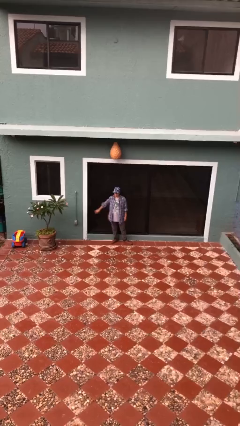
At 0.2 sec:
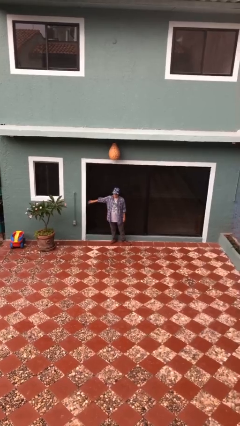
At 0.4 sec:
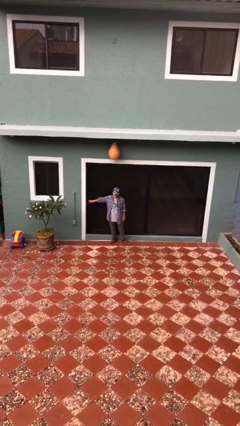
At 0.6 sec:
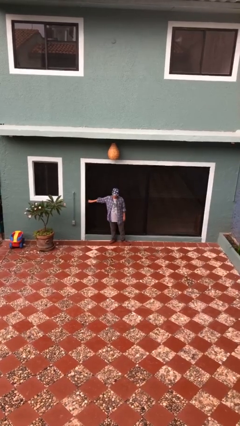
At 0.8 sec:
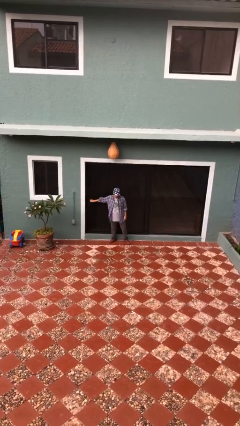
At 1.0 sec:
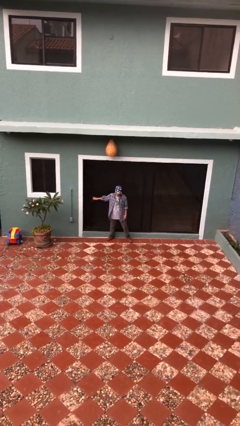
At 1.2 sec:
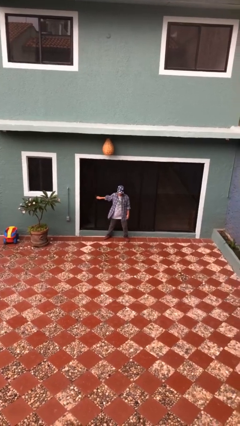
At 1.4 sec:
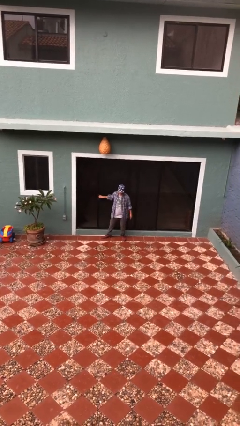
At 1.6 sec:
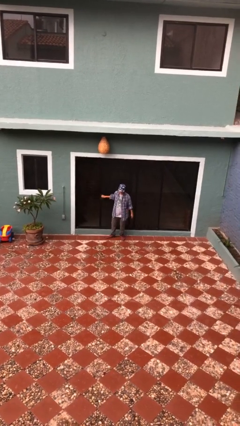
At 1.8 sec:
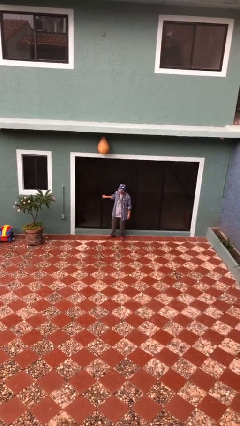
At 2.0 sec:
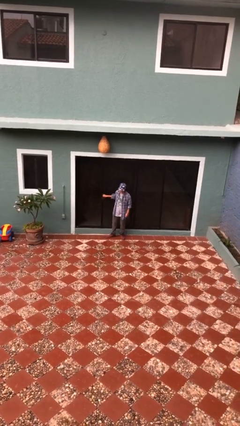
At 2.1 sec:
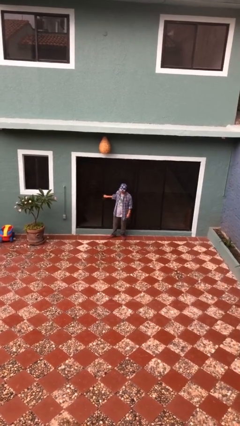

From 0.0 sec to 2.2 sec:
person opens sliding door

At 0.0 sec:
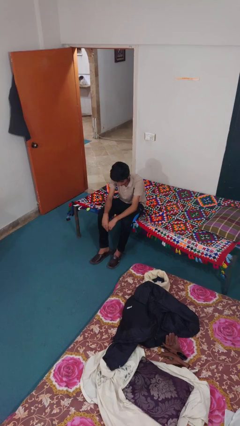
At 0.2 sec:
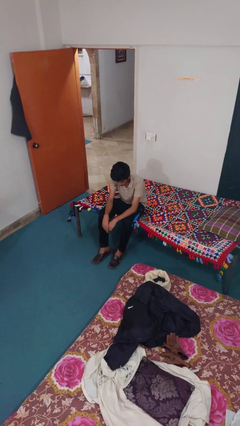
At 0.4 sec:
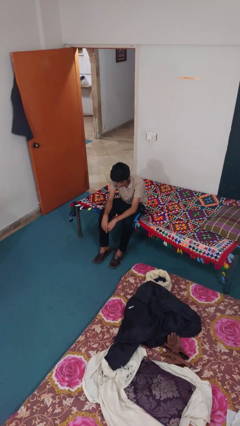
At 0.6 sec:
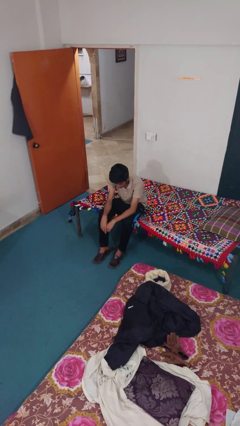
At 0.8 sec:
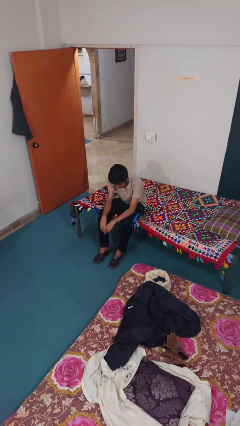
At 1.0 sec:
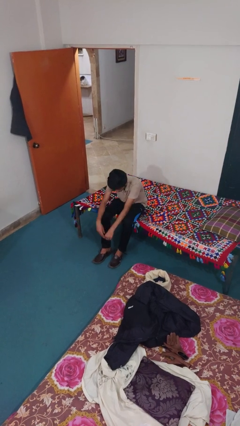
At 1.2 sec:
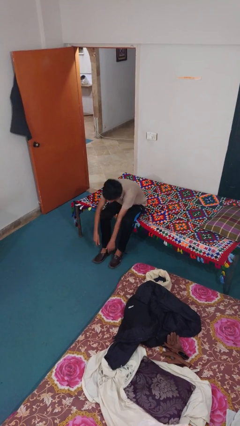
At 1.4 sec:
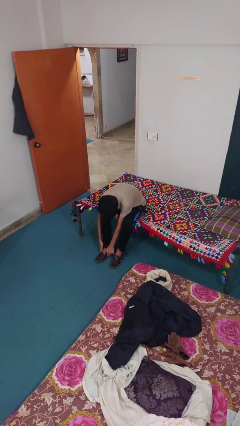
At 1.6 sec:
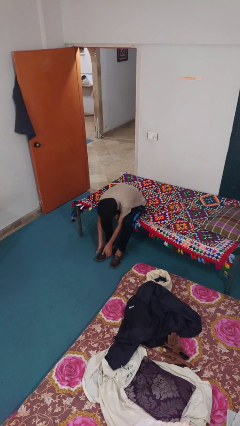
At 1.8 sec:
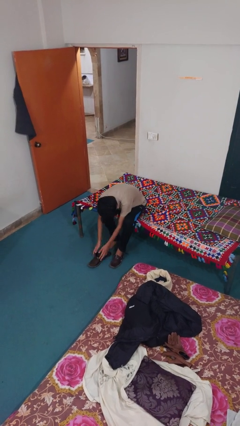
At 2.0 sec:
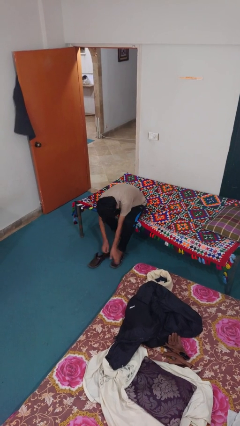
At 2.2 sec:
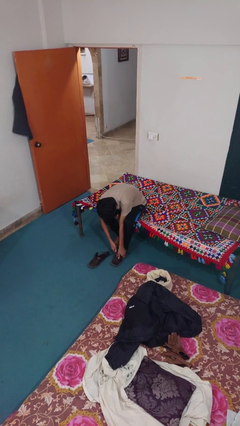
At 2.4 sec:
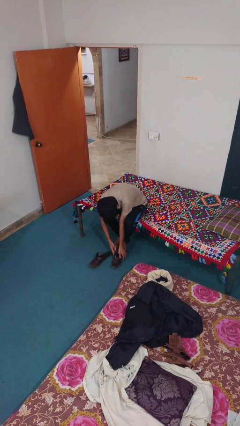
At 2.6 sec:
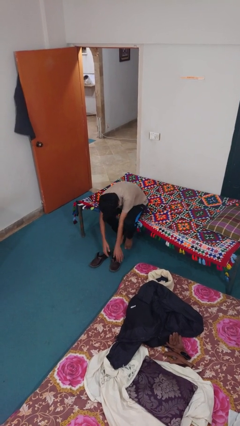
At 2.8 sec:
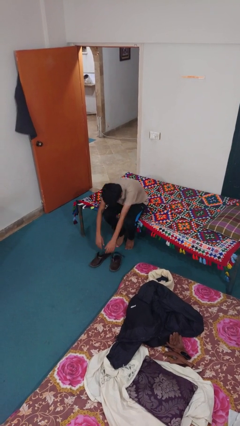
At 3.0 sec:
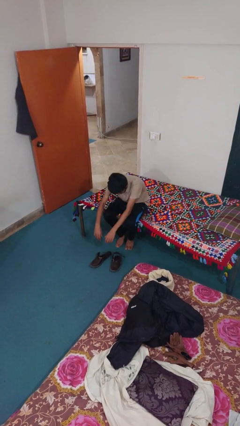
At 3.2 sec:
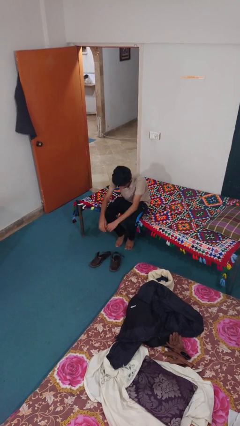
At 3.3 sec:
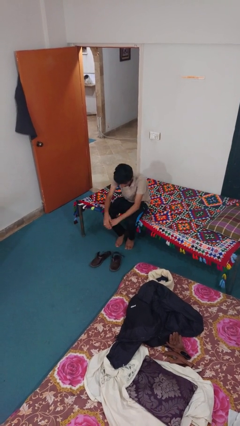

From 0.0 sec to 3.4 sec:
person takes off shoes

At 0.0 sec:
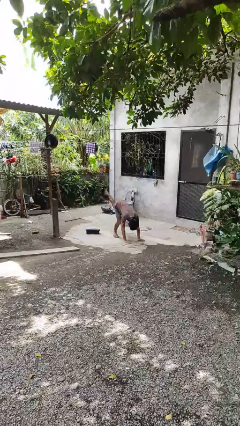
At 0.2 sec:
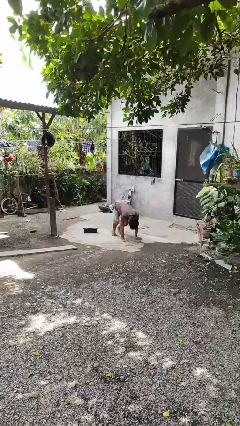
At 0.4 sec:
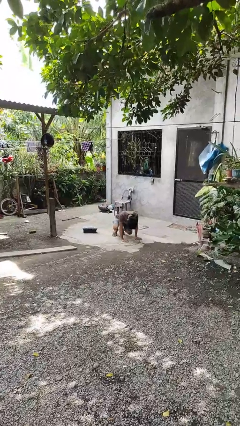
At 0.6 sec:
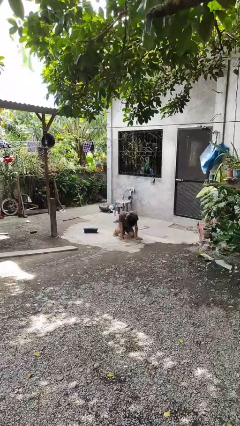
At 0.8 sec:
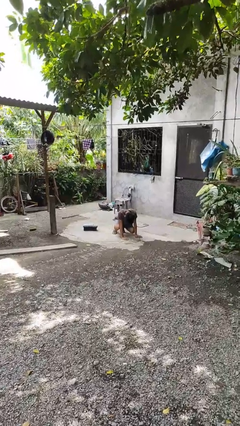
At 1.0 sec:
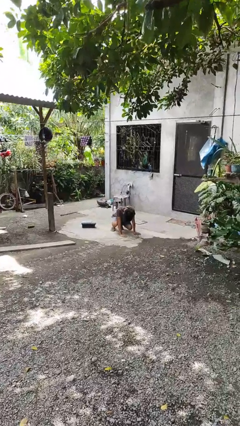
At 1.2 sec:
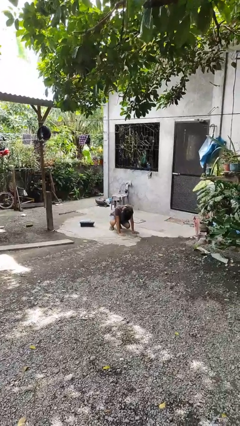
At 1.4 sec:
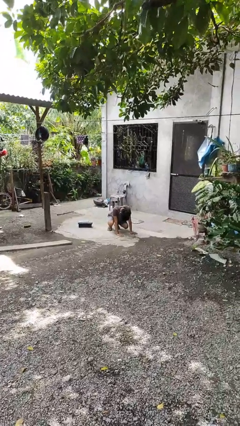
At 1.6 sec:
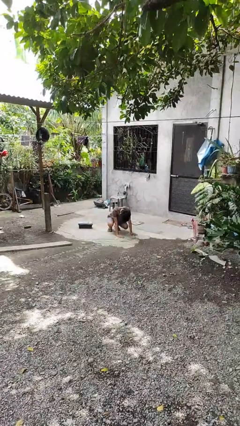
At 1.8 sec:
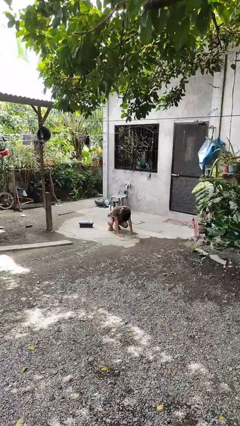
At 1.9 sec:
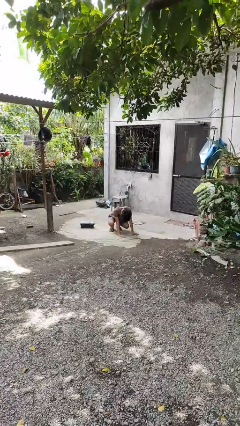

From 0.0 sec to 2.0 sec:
person lies down on floor

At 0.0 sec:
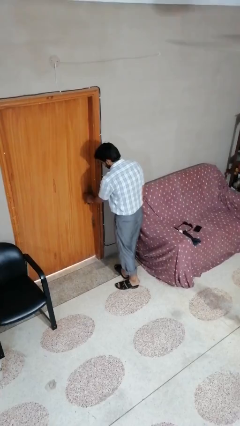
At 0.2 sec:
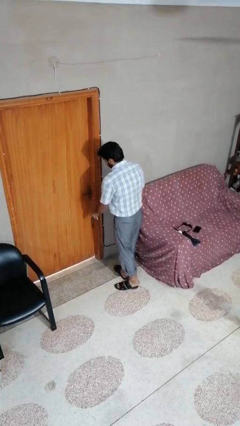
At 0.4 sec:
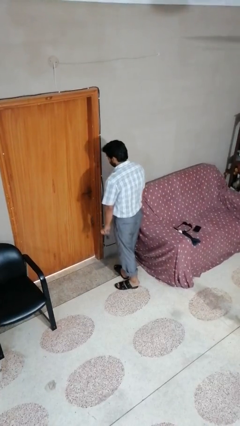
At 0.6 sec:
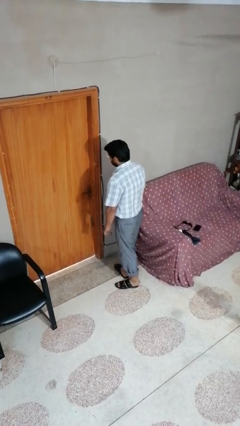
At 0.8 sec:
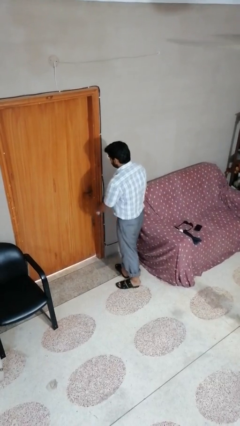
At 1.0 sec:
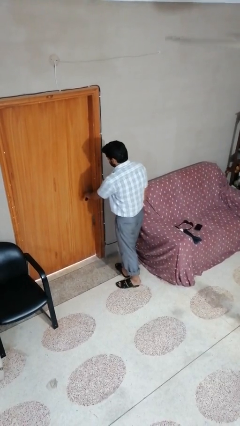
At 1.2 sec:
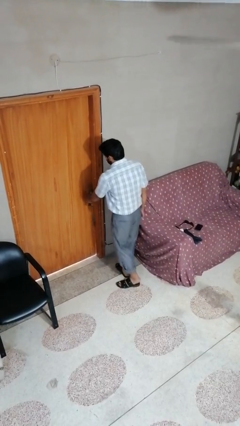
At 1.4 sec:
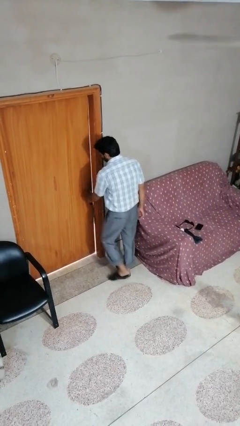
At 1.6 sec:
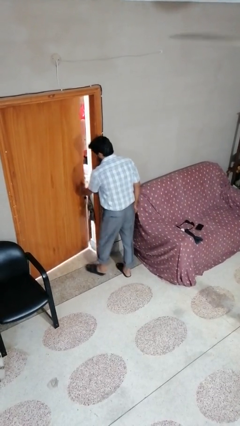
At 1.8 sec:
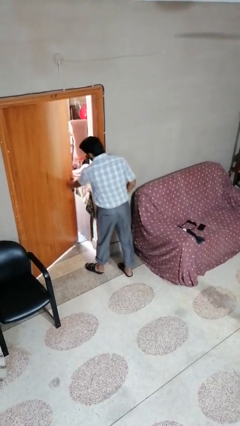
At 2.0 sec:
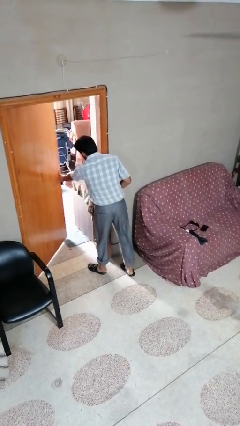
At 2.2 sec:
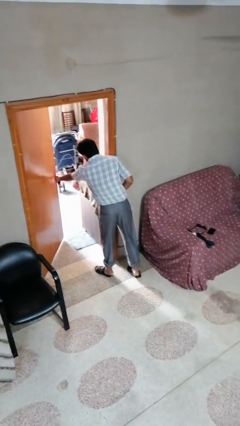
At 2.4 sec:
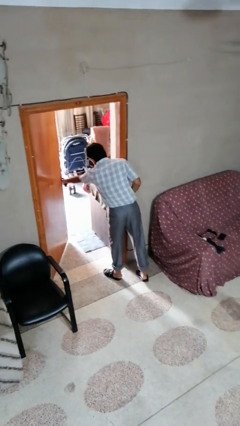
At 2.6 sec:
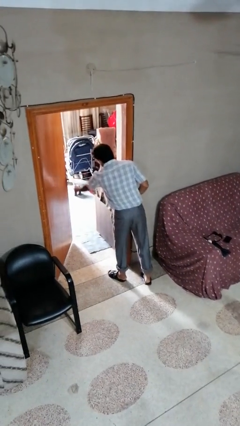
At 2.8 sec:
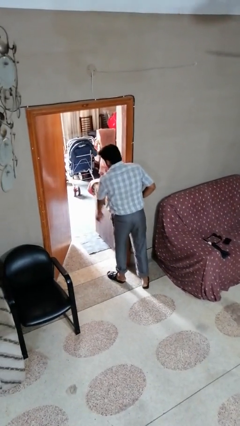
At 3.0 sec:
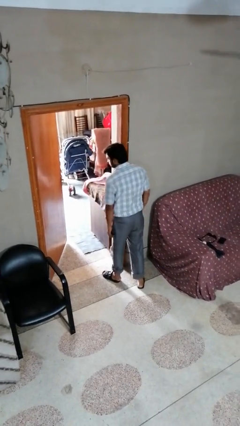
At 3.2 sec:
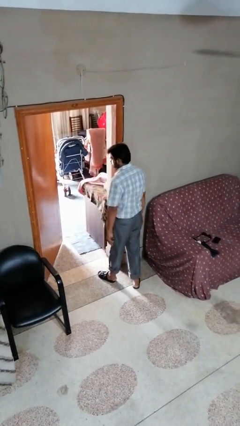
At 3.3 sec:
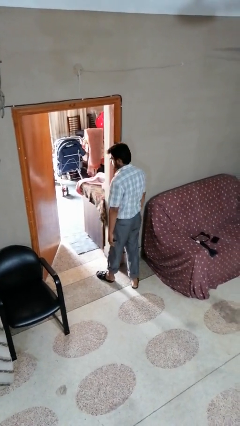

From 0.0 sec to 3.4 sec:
person opens facility door

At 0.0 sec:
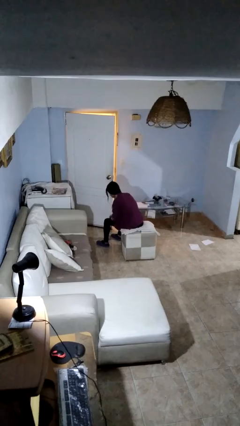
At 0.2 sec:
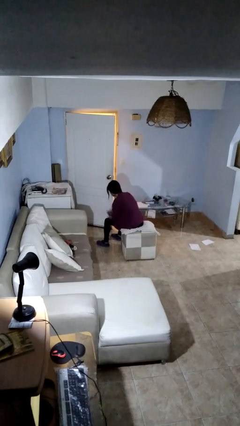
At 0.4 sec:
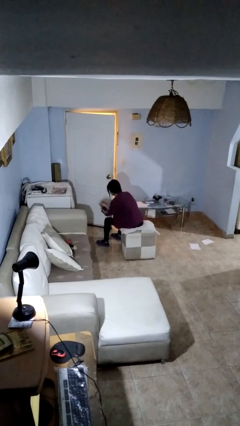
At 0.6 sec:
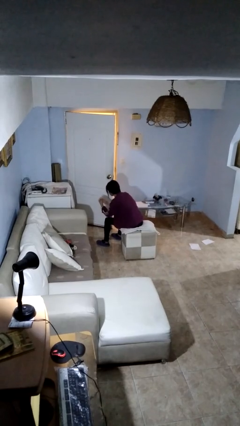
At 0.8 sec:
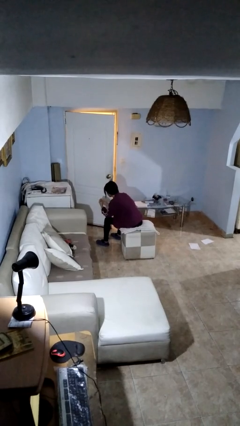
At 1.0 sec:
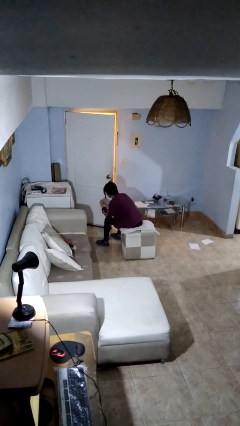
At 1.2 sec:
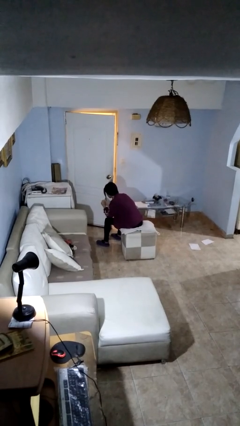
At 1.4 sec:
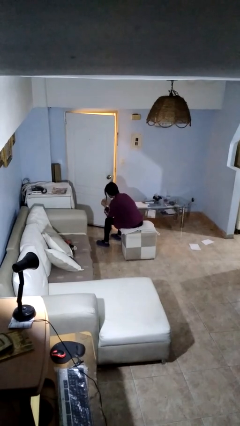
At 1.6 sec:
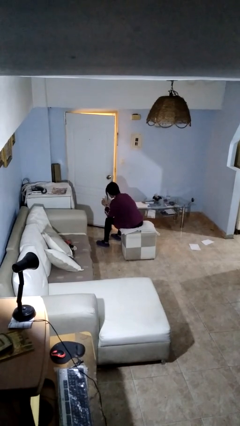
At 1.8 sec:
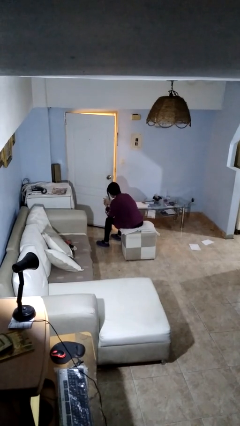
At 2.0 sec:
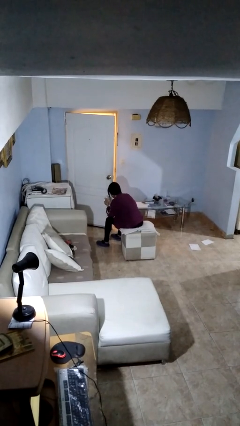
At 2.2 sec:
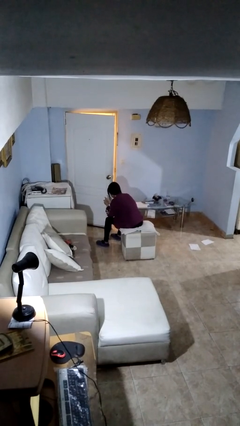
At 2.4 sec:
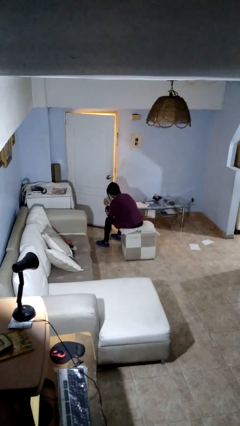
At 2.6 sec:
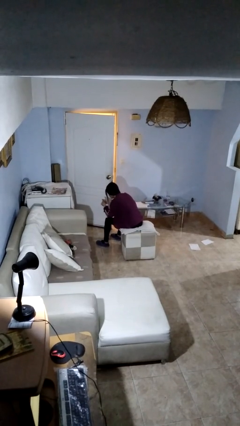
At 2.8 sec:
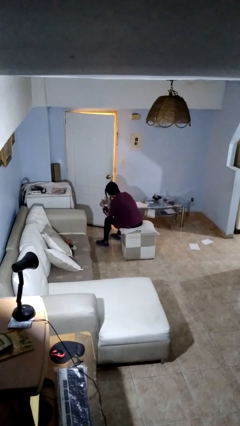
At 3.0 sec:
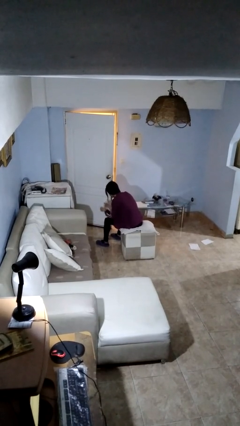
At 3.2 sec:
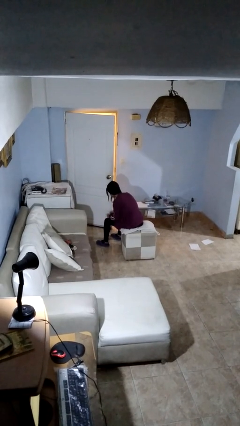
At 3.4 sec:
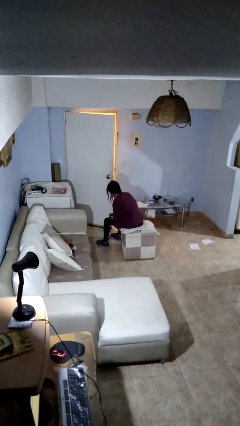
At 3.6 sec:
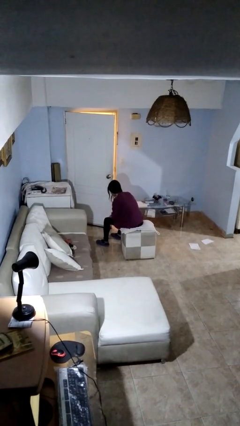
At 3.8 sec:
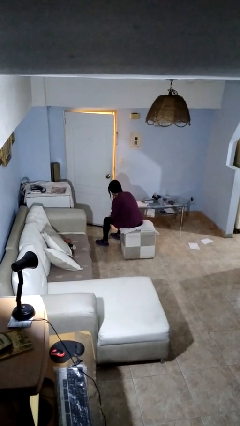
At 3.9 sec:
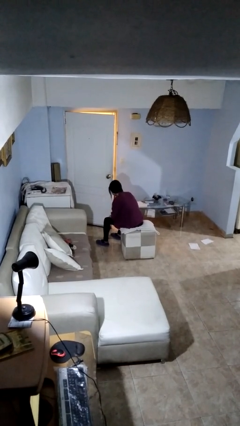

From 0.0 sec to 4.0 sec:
person looks at hands in lap

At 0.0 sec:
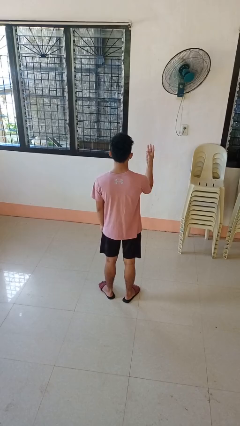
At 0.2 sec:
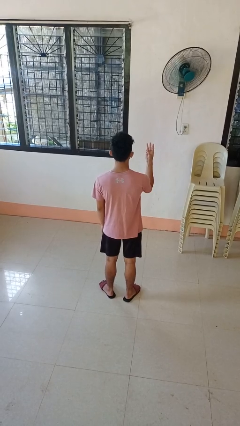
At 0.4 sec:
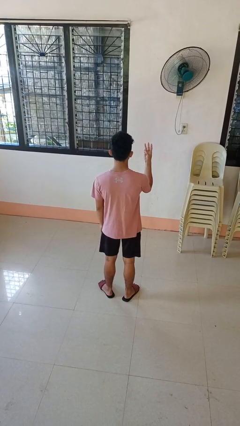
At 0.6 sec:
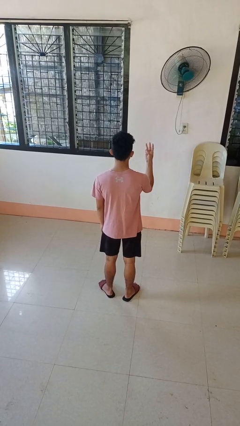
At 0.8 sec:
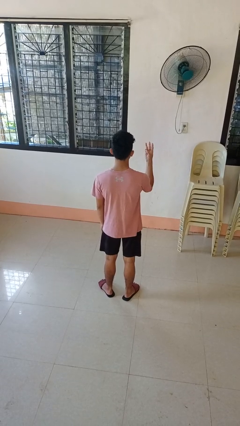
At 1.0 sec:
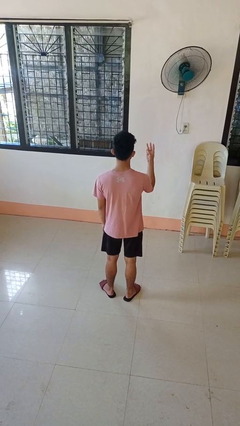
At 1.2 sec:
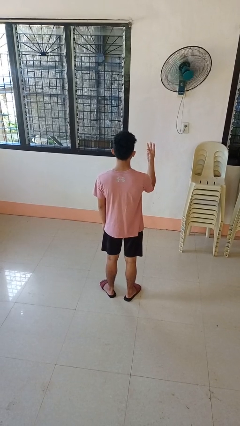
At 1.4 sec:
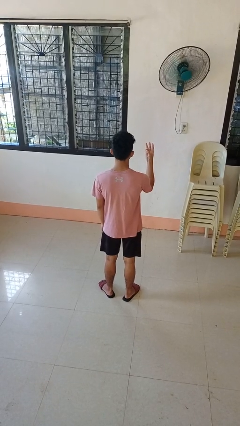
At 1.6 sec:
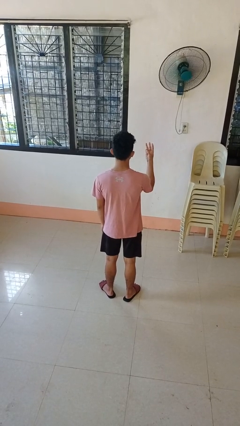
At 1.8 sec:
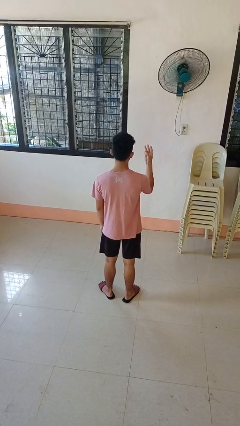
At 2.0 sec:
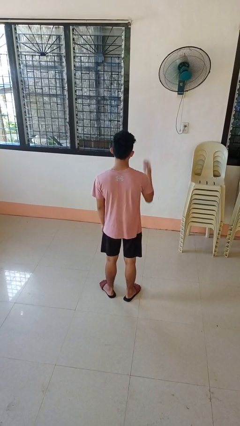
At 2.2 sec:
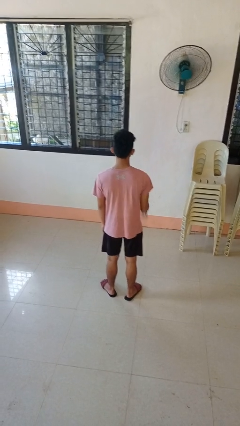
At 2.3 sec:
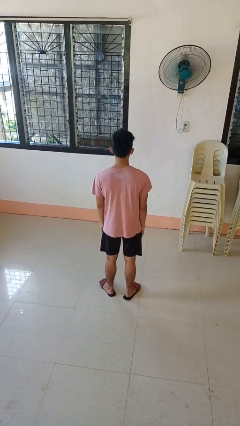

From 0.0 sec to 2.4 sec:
person gestures number three
